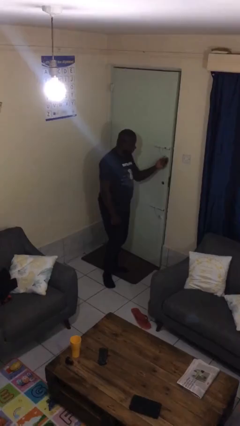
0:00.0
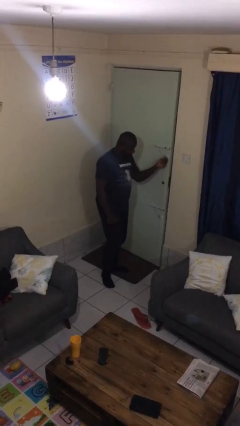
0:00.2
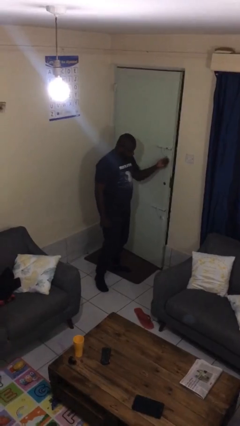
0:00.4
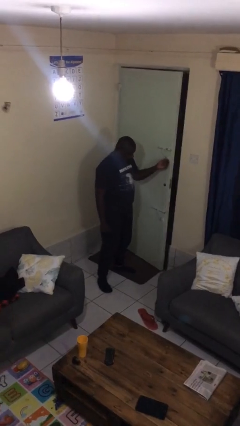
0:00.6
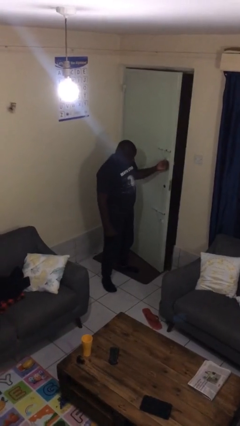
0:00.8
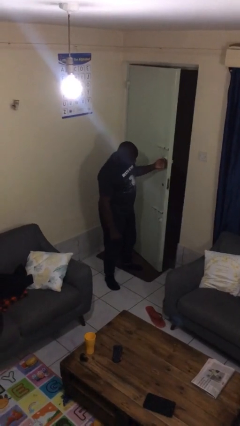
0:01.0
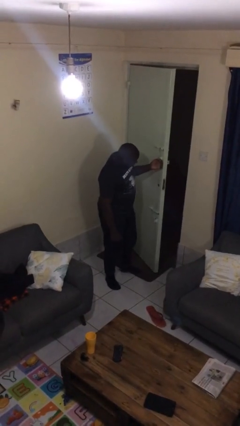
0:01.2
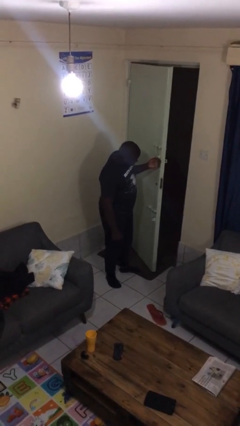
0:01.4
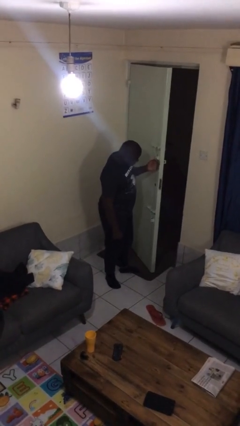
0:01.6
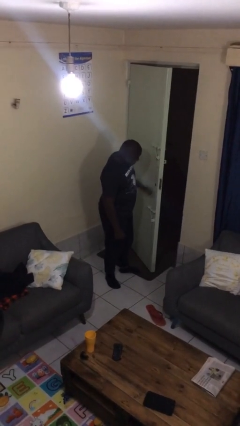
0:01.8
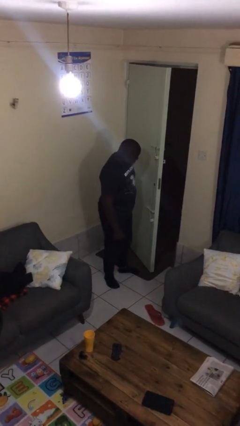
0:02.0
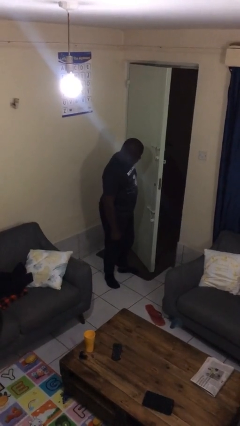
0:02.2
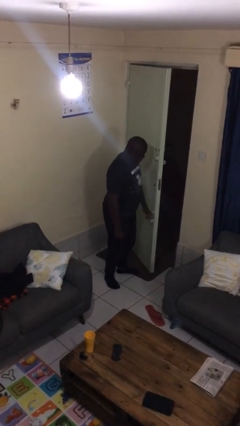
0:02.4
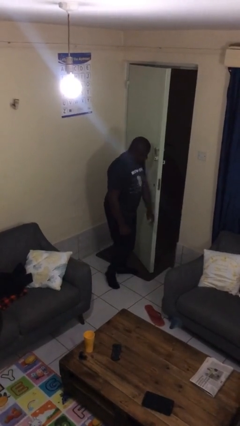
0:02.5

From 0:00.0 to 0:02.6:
person opens facility door

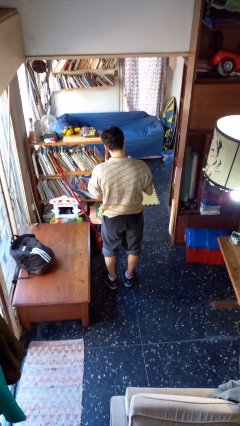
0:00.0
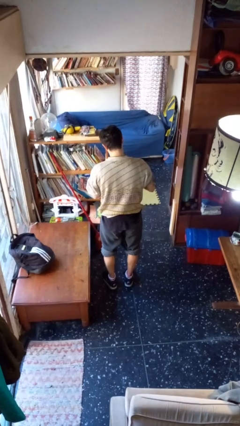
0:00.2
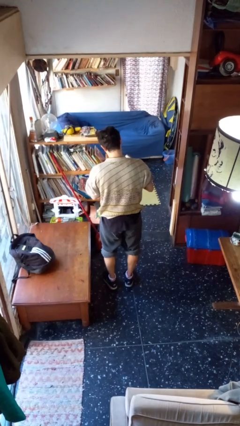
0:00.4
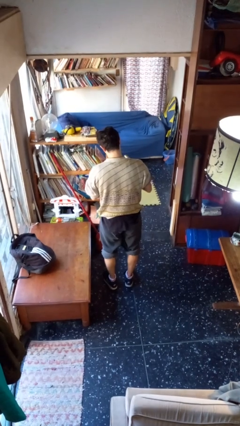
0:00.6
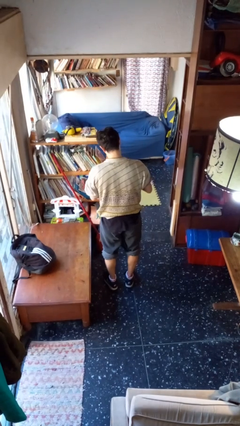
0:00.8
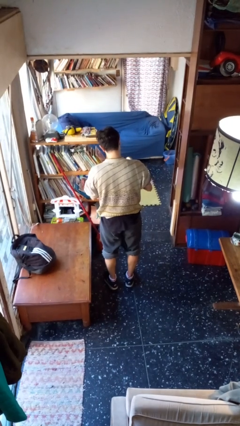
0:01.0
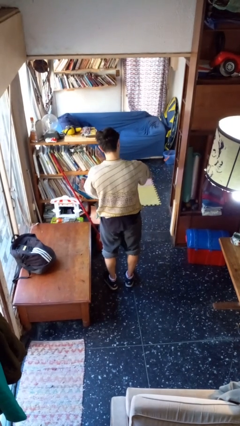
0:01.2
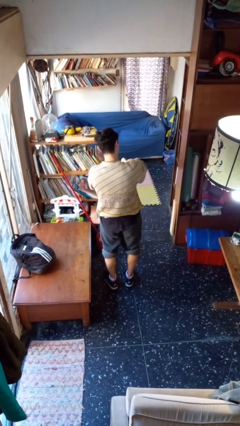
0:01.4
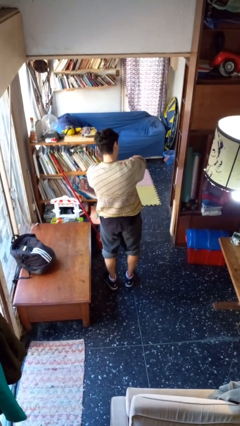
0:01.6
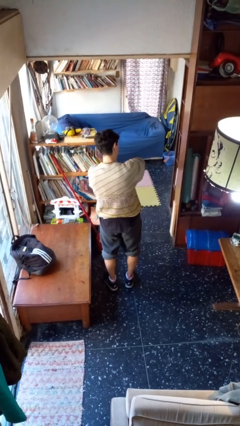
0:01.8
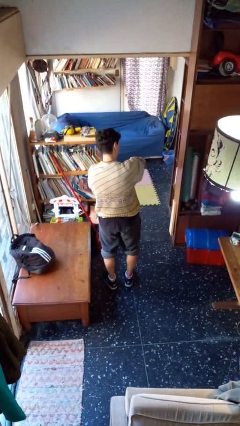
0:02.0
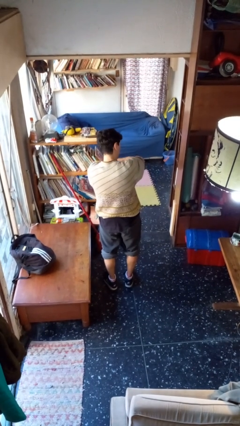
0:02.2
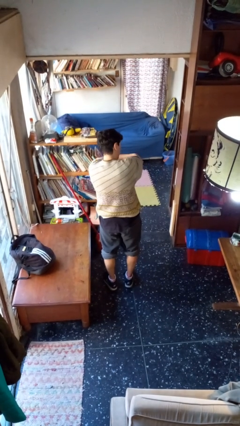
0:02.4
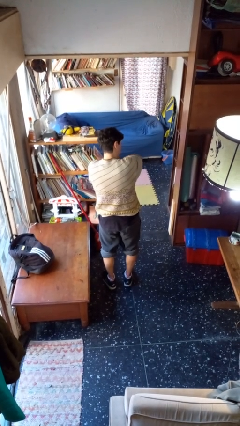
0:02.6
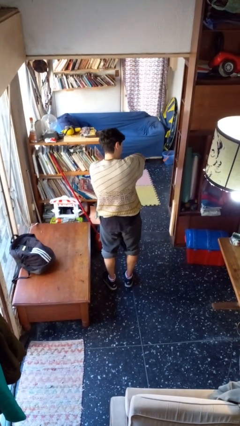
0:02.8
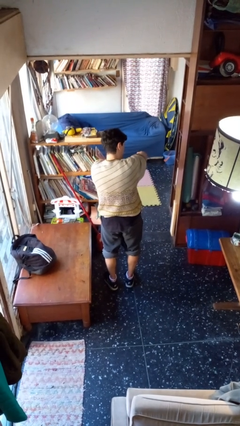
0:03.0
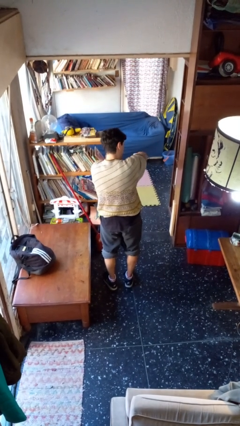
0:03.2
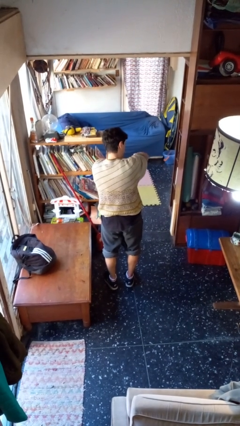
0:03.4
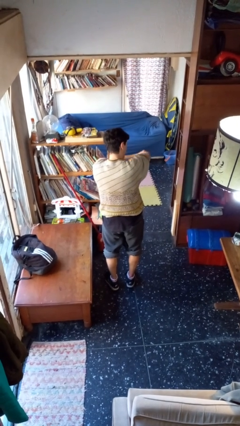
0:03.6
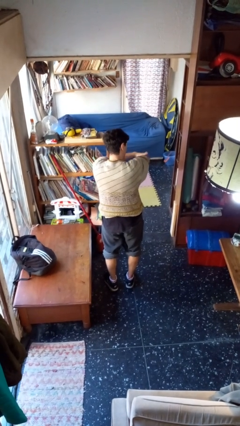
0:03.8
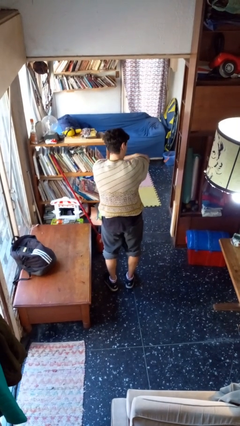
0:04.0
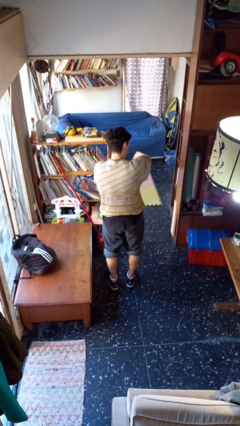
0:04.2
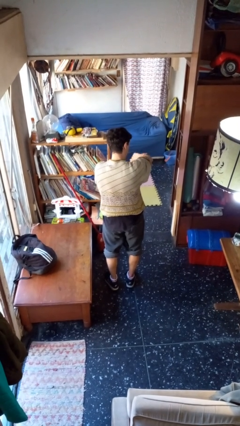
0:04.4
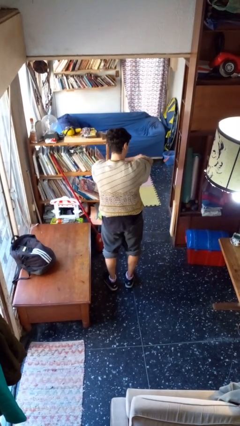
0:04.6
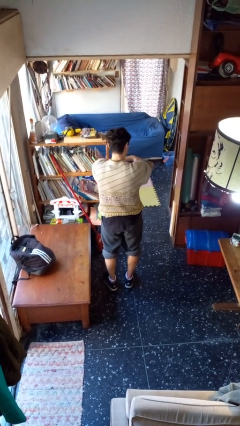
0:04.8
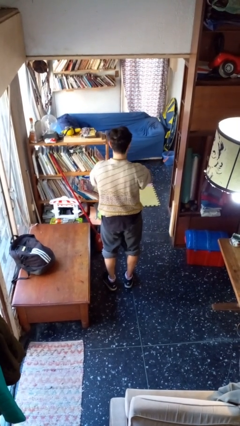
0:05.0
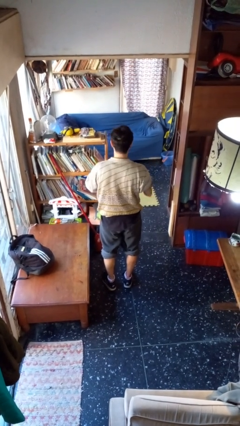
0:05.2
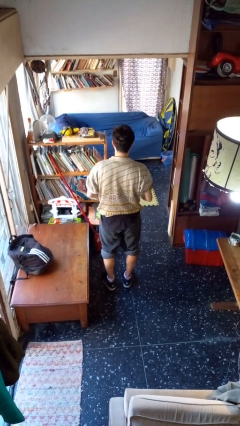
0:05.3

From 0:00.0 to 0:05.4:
person applies sunscreen

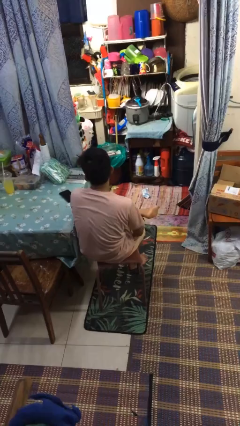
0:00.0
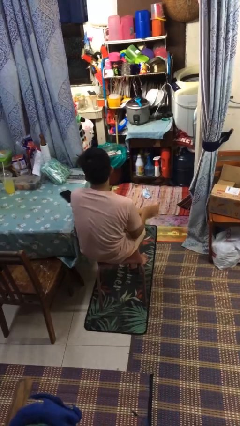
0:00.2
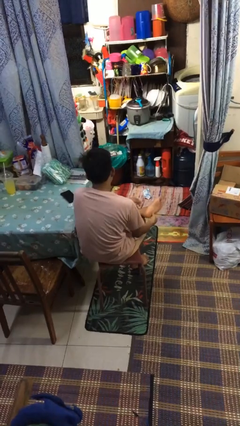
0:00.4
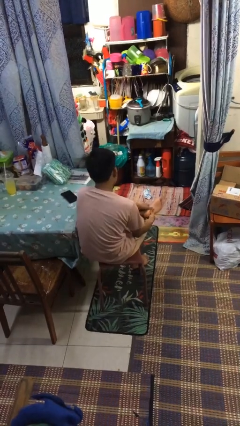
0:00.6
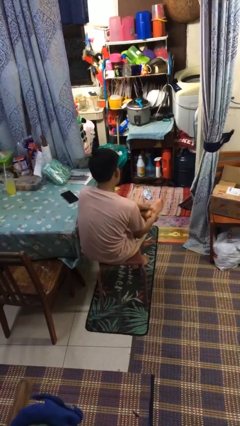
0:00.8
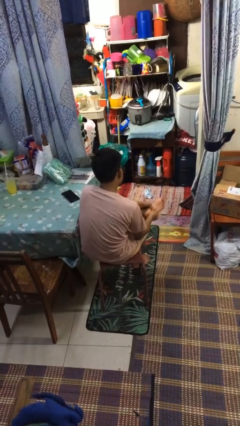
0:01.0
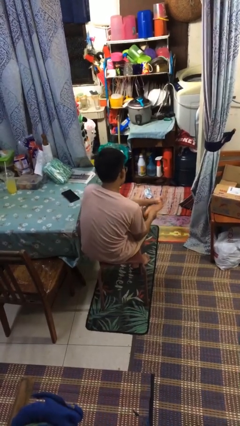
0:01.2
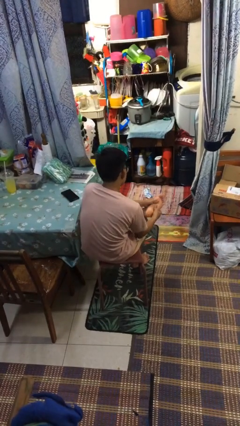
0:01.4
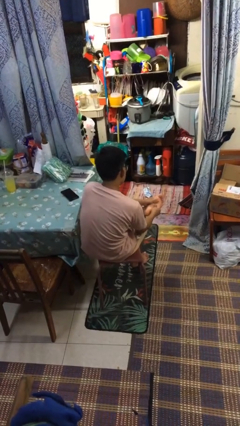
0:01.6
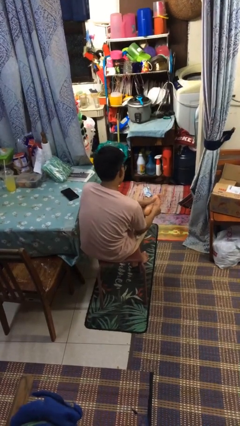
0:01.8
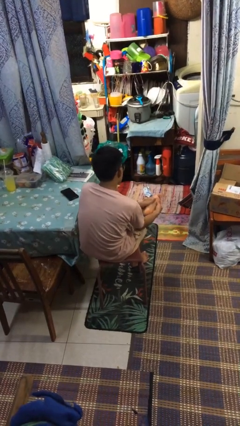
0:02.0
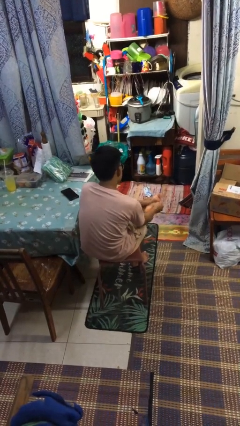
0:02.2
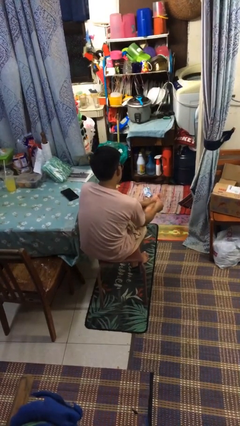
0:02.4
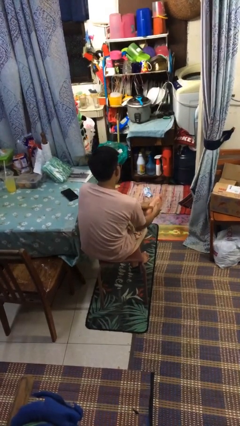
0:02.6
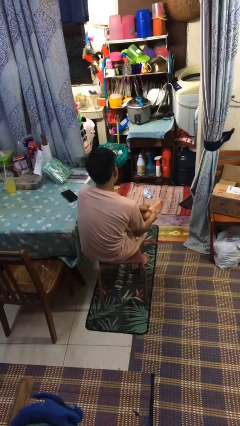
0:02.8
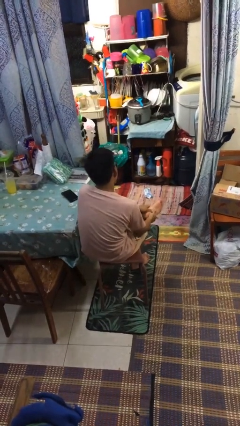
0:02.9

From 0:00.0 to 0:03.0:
person rubs foot

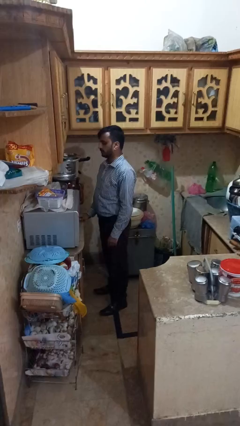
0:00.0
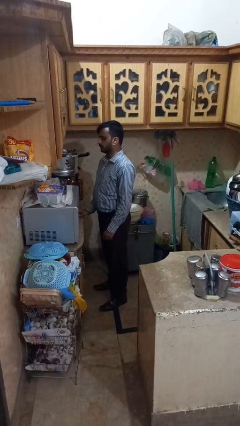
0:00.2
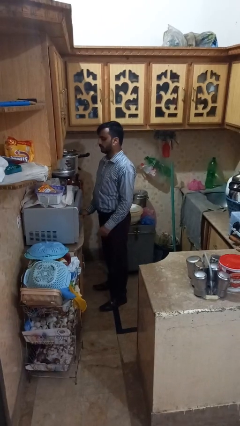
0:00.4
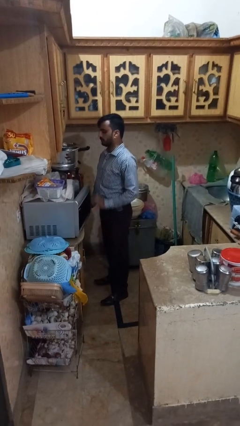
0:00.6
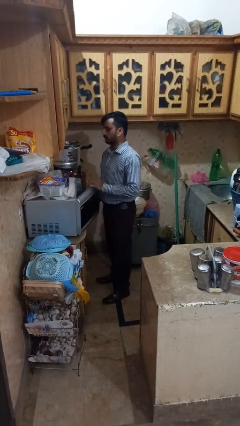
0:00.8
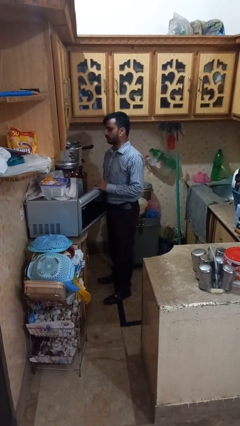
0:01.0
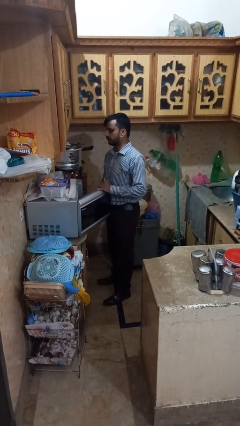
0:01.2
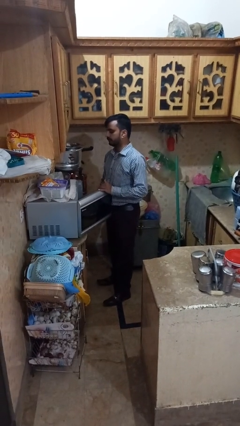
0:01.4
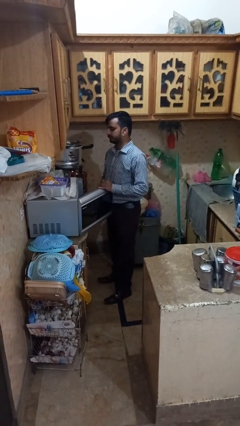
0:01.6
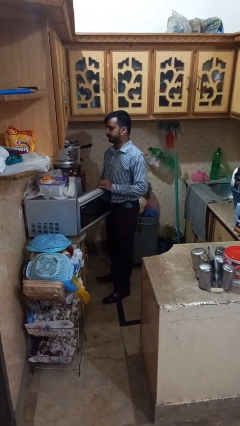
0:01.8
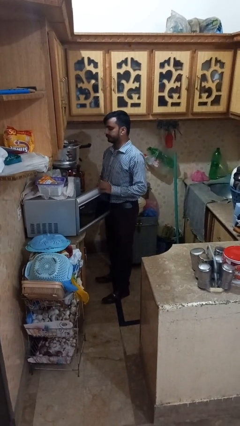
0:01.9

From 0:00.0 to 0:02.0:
person opens microwave

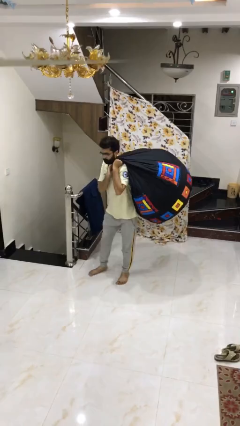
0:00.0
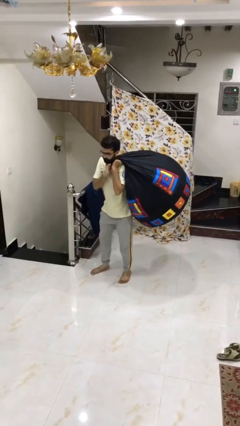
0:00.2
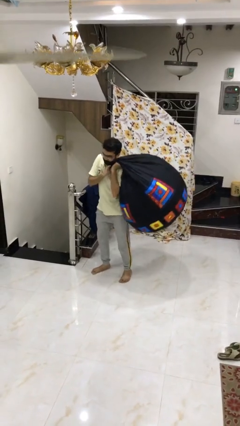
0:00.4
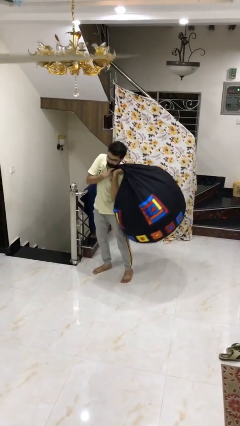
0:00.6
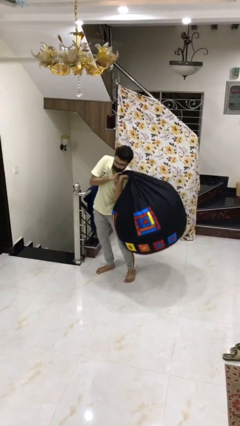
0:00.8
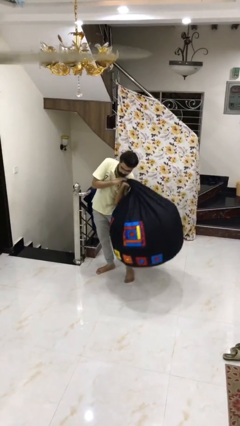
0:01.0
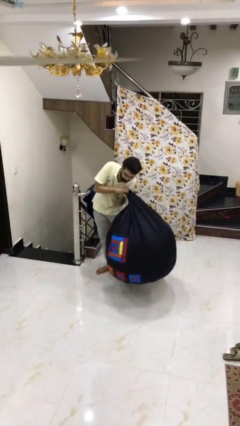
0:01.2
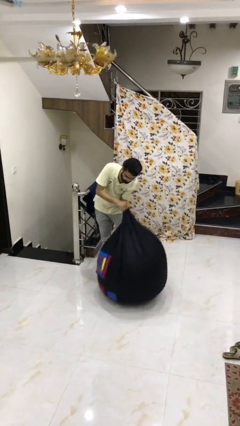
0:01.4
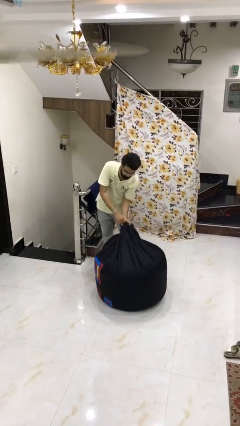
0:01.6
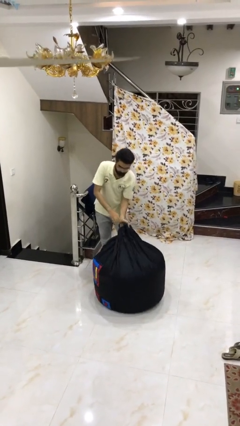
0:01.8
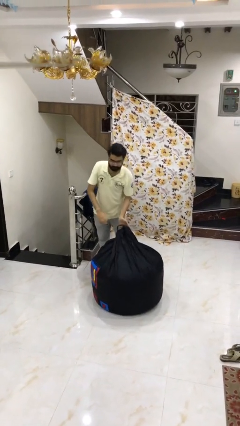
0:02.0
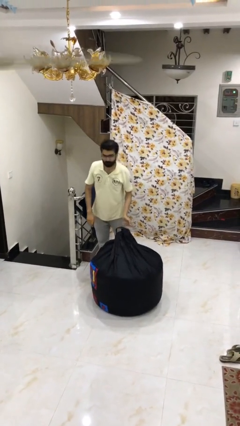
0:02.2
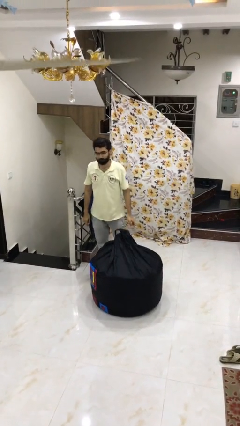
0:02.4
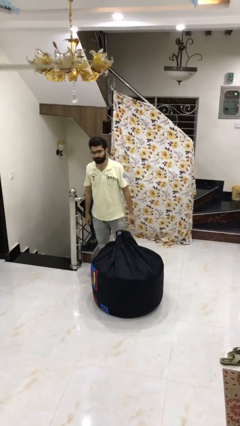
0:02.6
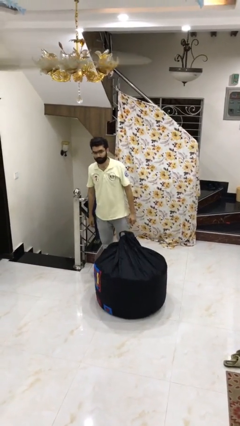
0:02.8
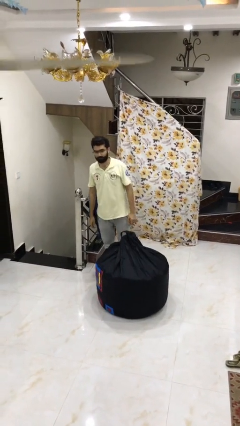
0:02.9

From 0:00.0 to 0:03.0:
person puts down object on floor

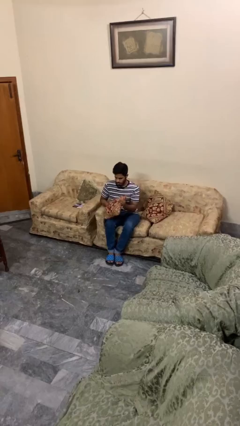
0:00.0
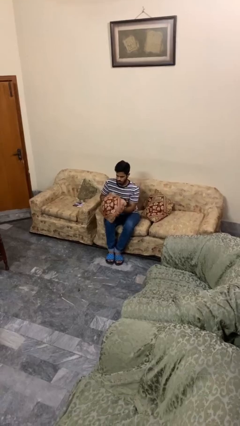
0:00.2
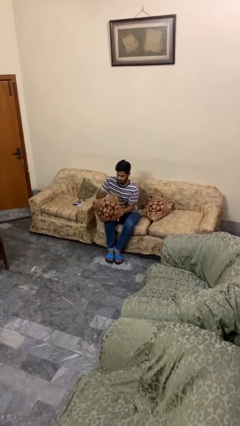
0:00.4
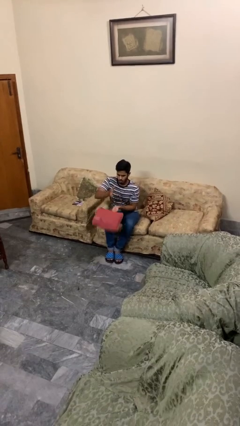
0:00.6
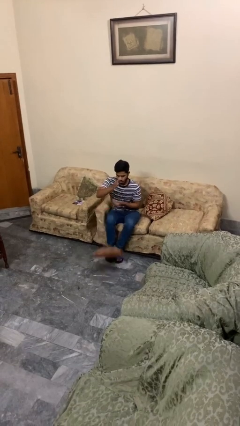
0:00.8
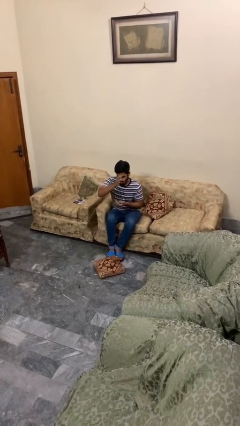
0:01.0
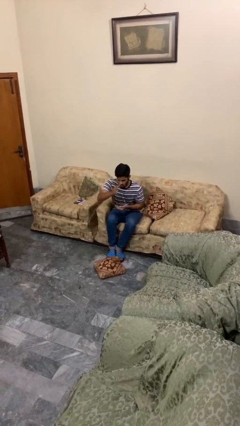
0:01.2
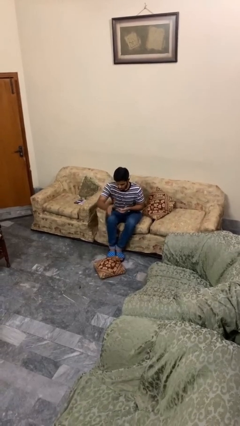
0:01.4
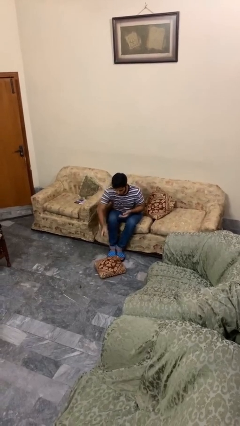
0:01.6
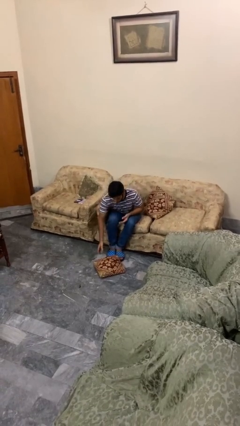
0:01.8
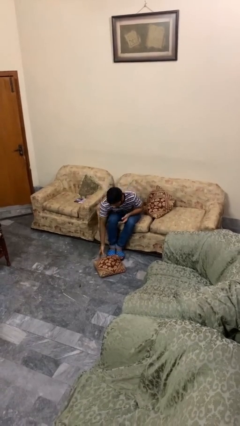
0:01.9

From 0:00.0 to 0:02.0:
person drops object
